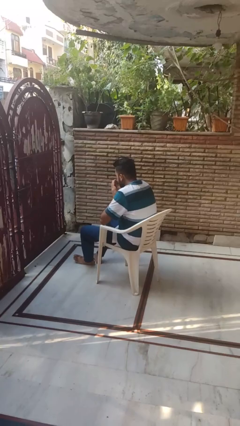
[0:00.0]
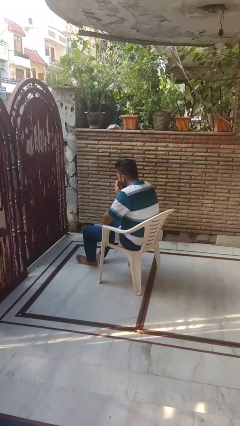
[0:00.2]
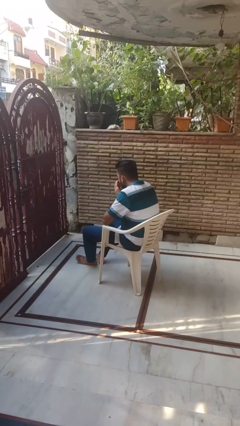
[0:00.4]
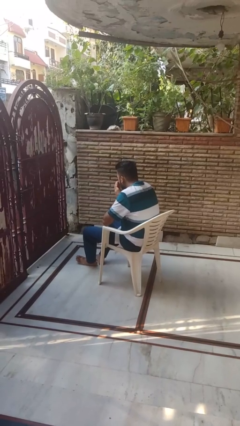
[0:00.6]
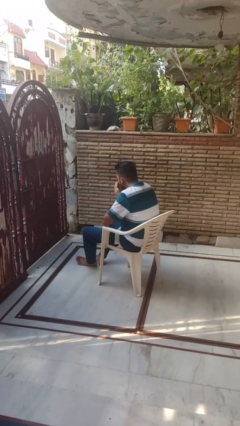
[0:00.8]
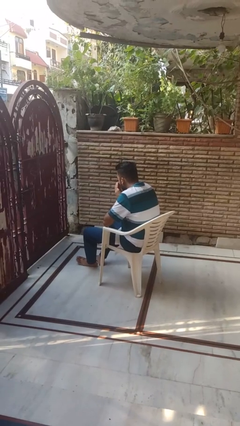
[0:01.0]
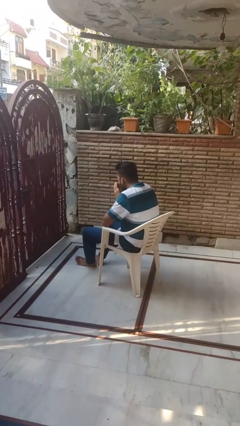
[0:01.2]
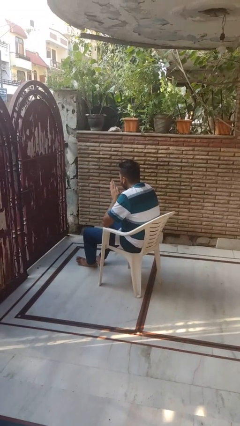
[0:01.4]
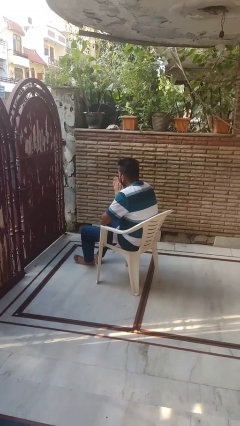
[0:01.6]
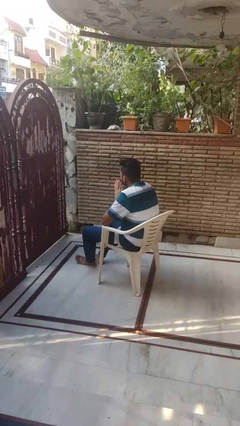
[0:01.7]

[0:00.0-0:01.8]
person blows into hands

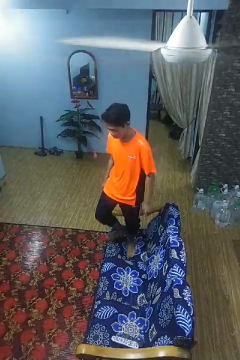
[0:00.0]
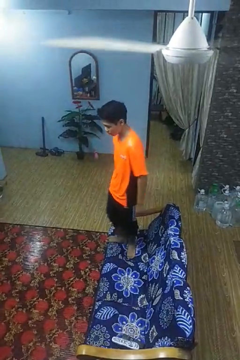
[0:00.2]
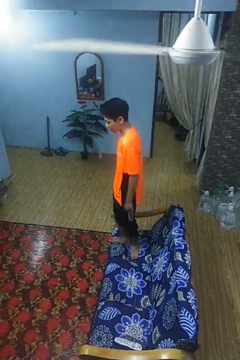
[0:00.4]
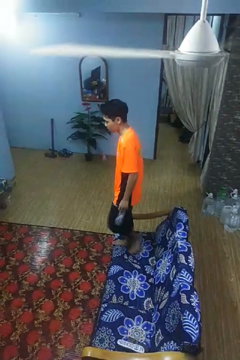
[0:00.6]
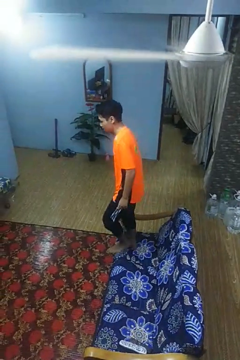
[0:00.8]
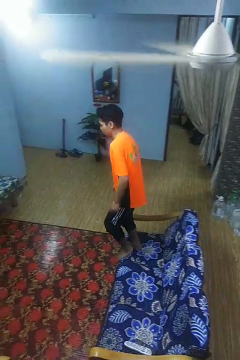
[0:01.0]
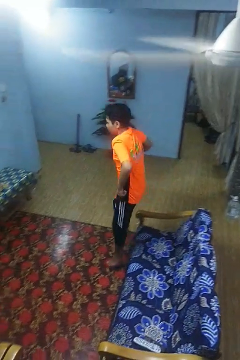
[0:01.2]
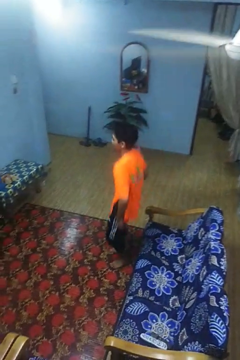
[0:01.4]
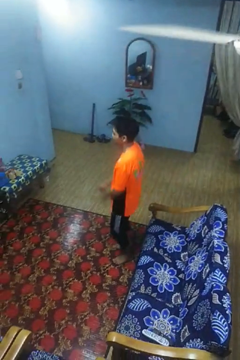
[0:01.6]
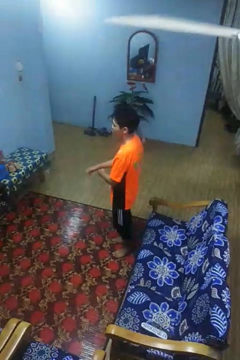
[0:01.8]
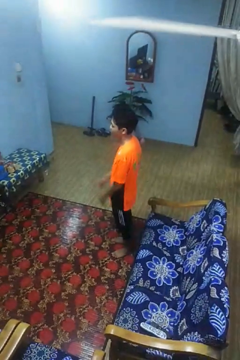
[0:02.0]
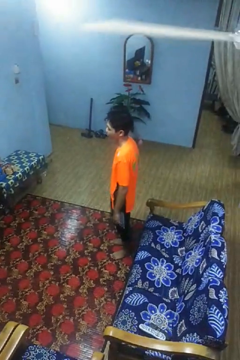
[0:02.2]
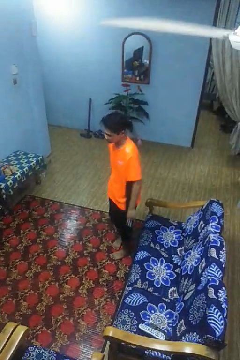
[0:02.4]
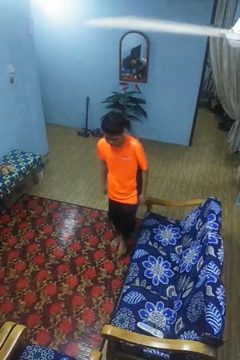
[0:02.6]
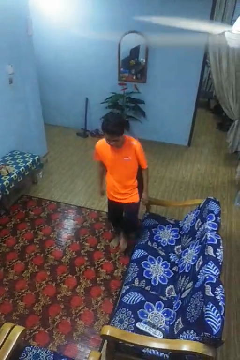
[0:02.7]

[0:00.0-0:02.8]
person jumps on couch

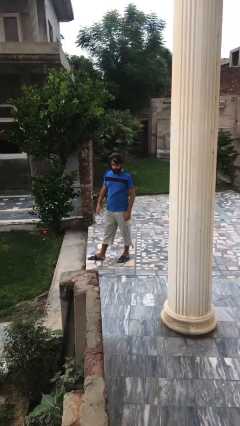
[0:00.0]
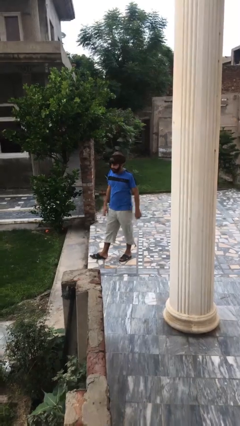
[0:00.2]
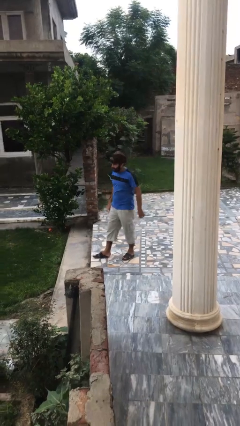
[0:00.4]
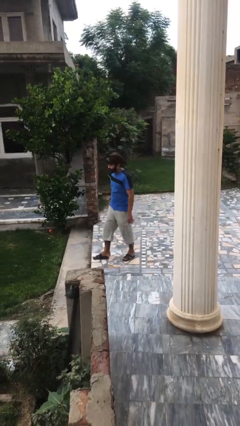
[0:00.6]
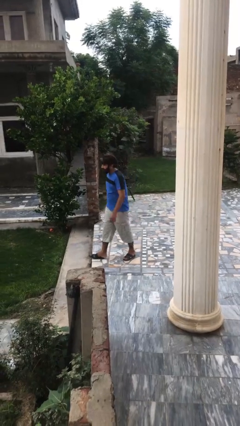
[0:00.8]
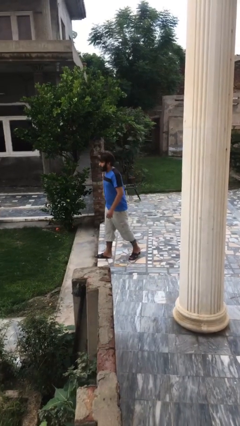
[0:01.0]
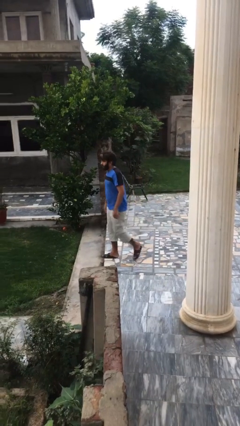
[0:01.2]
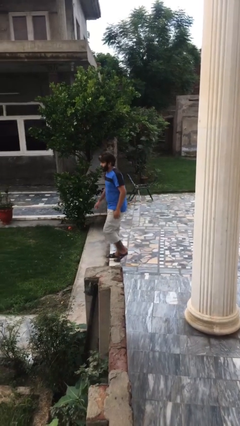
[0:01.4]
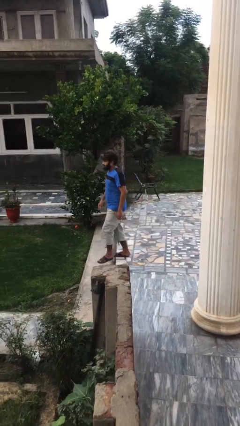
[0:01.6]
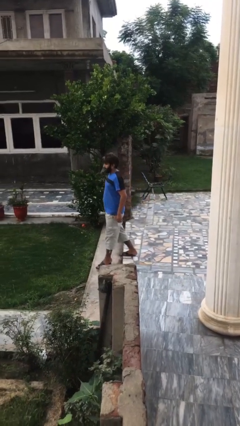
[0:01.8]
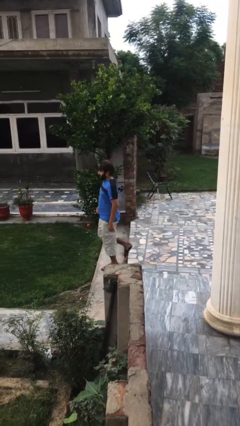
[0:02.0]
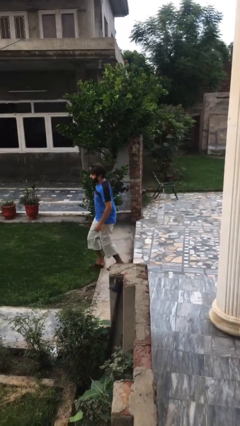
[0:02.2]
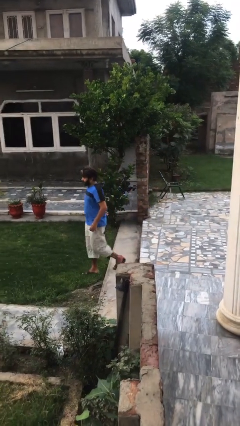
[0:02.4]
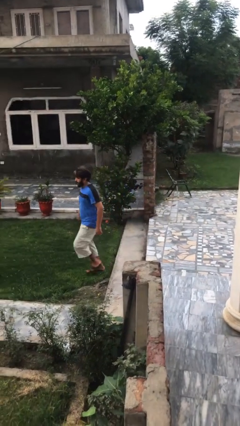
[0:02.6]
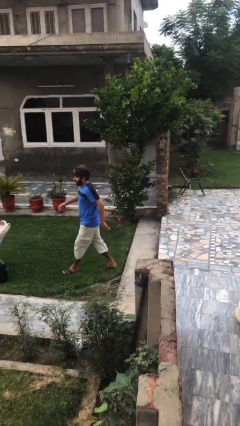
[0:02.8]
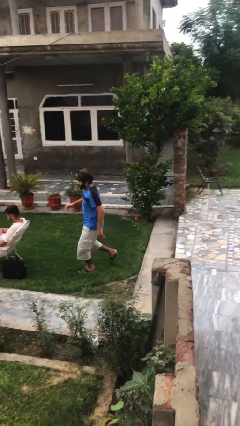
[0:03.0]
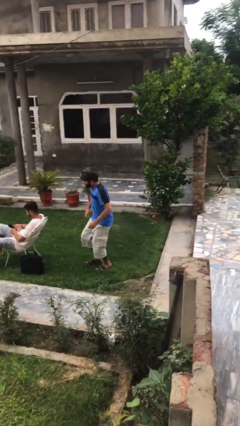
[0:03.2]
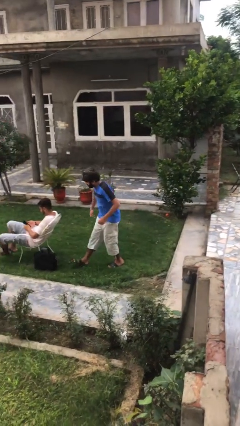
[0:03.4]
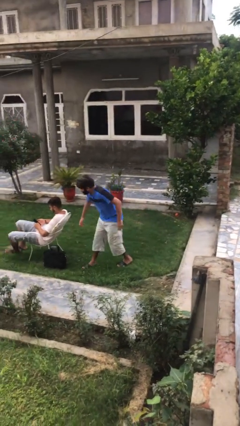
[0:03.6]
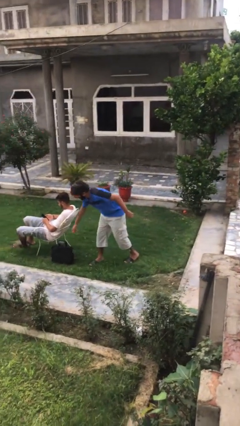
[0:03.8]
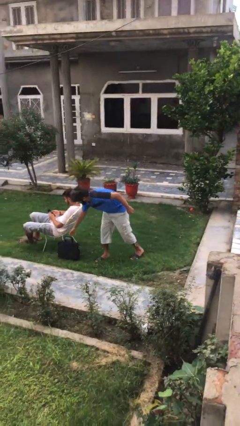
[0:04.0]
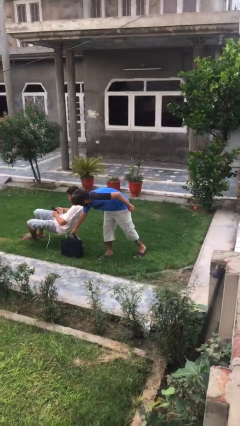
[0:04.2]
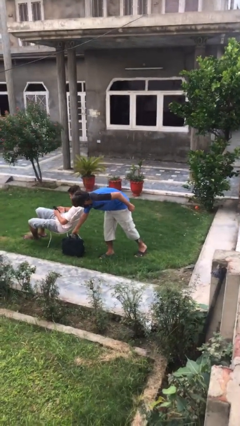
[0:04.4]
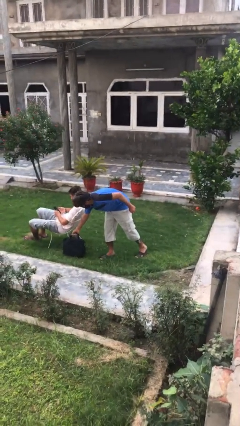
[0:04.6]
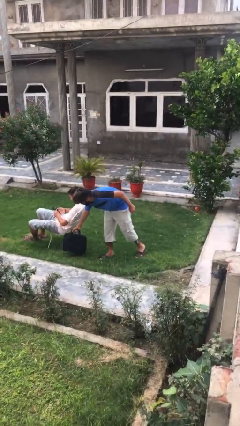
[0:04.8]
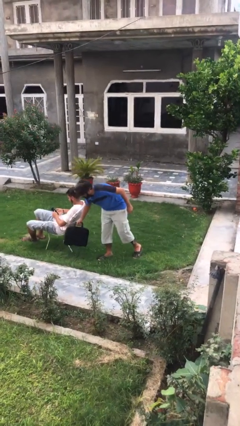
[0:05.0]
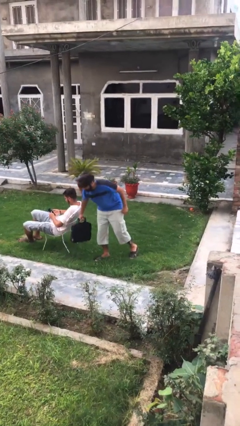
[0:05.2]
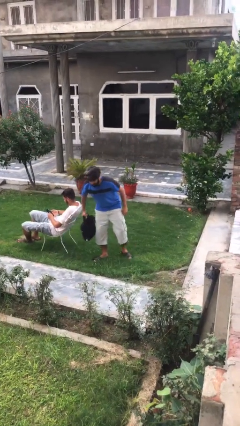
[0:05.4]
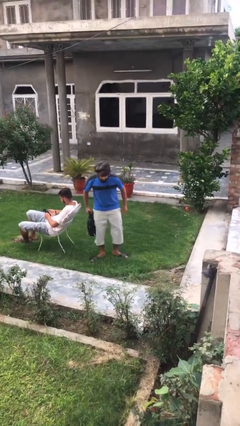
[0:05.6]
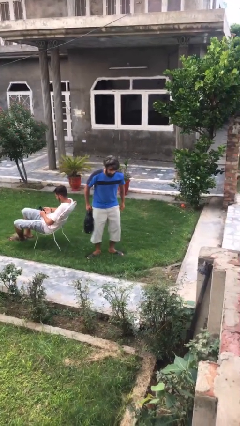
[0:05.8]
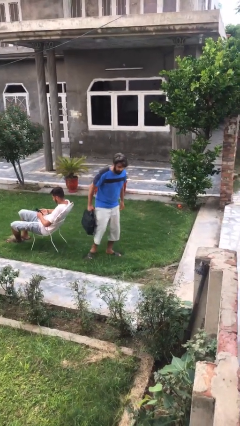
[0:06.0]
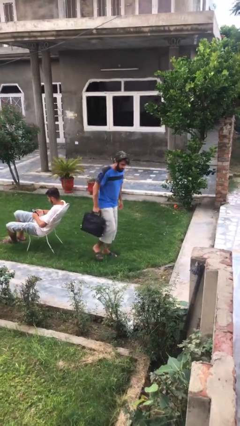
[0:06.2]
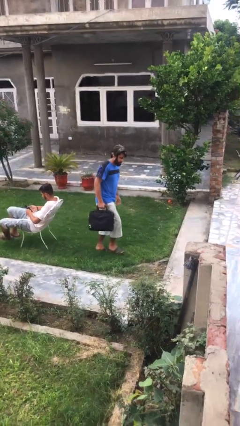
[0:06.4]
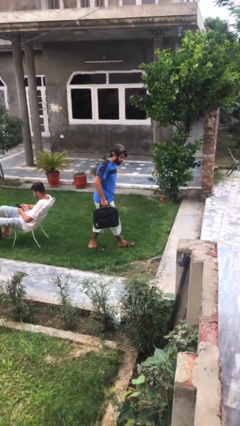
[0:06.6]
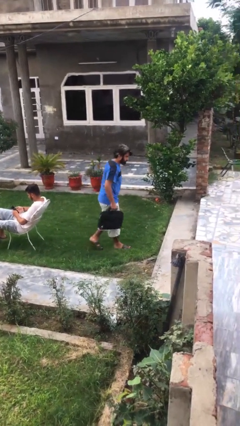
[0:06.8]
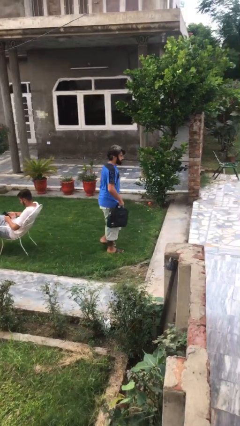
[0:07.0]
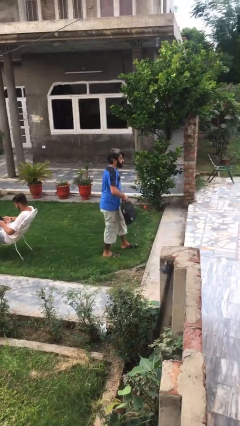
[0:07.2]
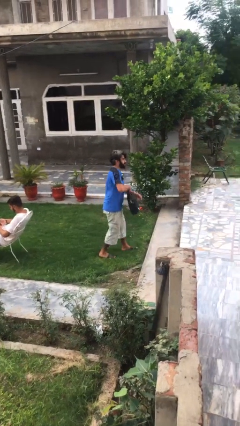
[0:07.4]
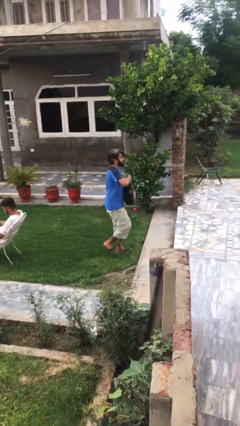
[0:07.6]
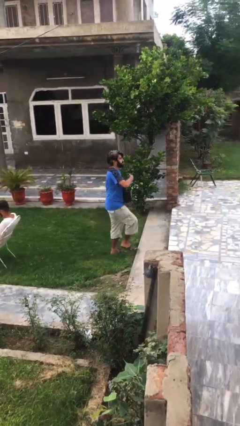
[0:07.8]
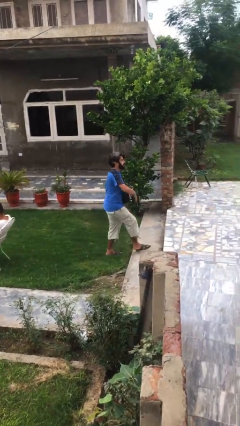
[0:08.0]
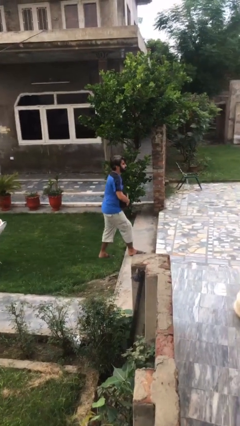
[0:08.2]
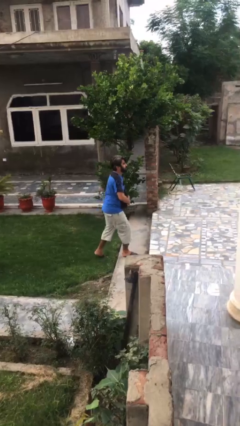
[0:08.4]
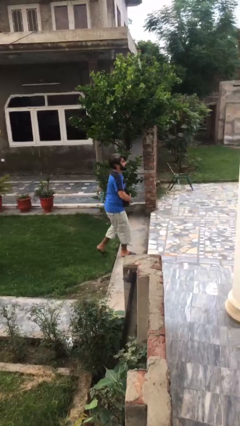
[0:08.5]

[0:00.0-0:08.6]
person steals object from person

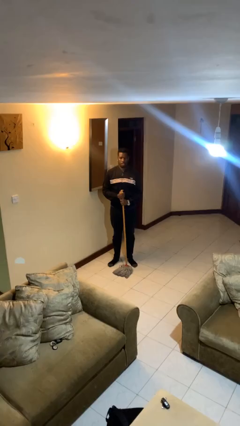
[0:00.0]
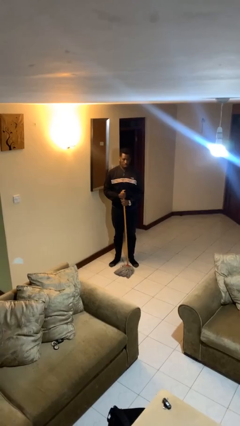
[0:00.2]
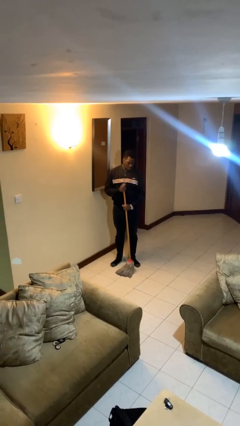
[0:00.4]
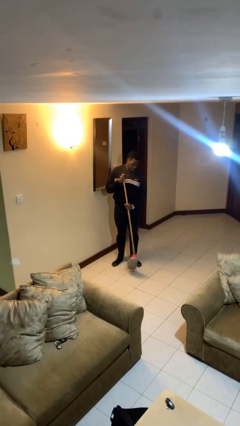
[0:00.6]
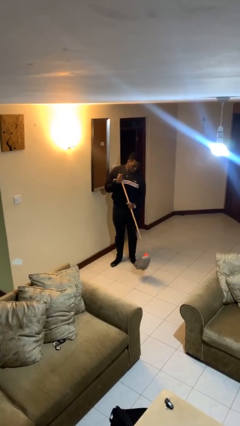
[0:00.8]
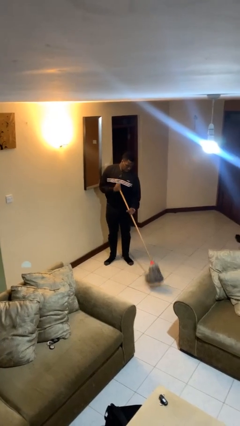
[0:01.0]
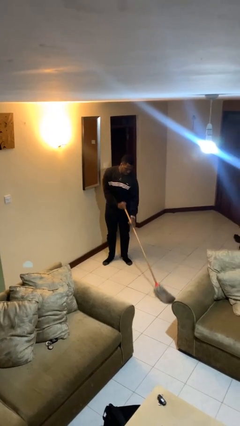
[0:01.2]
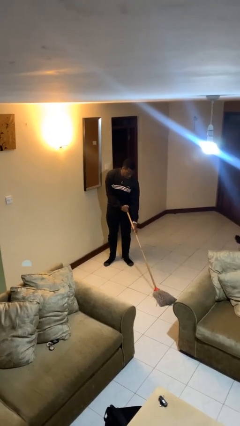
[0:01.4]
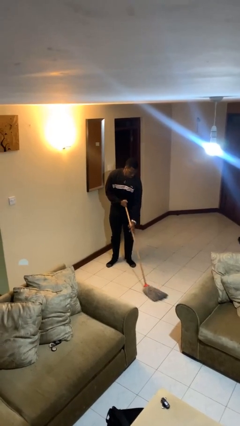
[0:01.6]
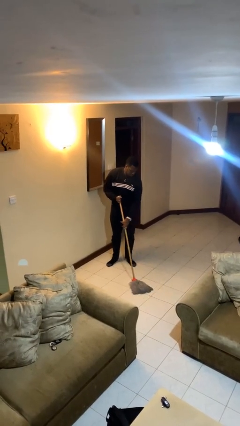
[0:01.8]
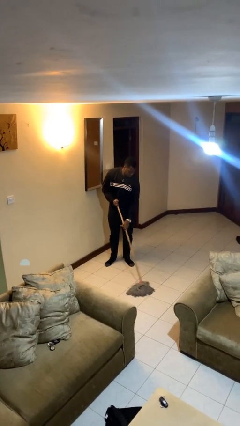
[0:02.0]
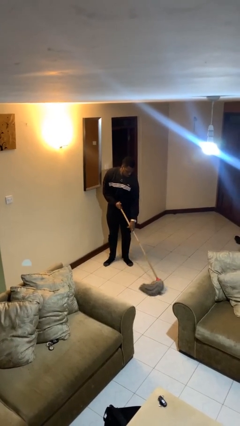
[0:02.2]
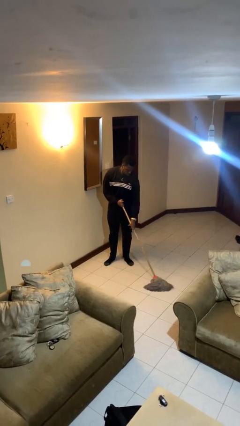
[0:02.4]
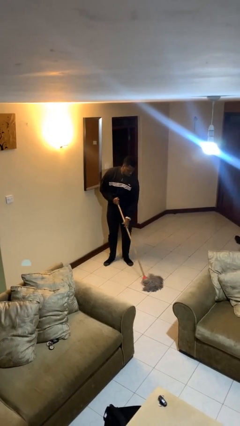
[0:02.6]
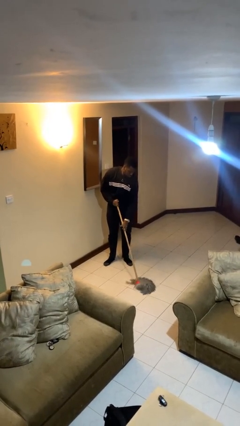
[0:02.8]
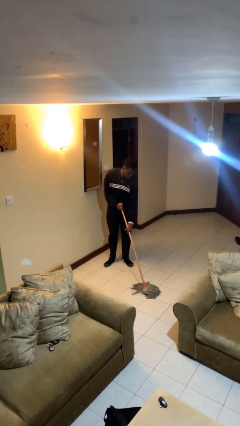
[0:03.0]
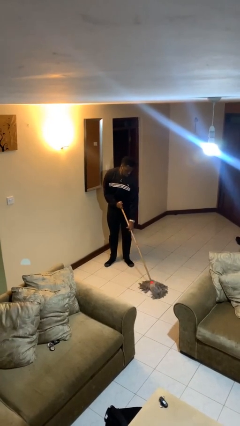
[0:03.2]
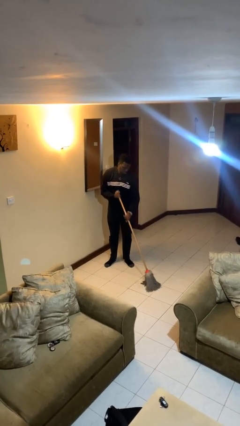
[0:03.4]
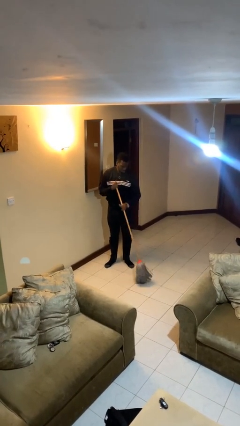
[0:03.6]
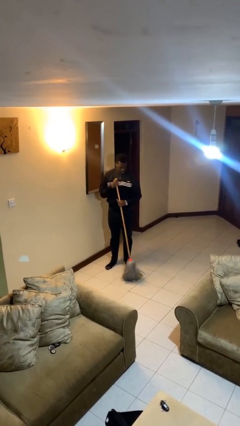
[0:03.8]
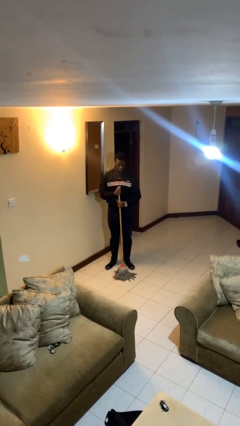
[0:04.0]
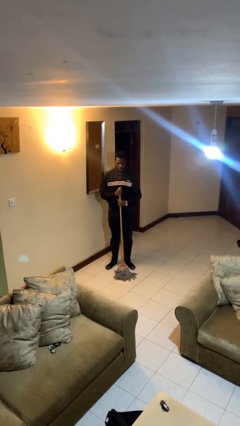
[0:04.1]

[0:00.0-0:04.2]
person mops

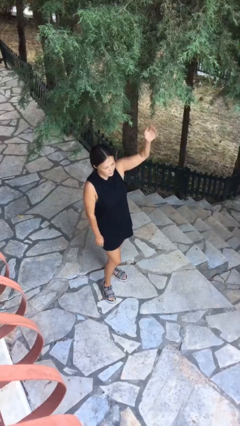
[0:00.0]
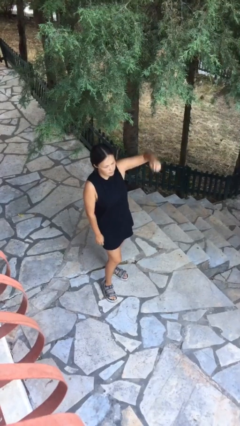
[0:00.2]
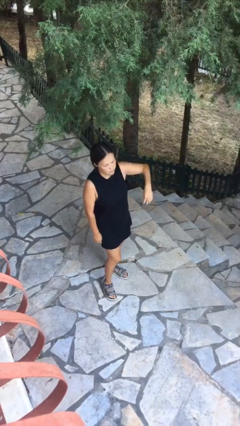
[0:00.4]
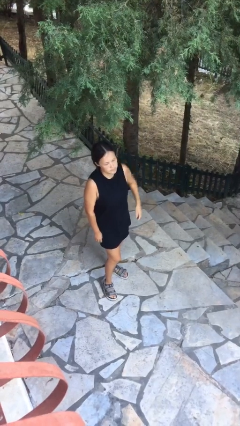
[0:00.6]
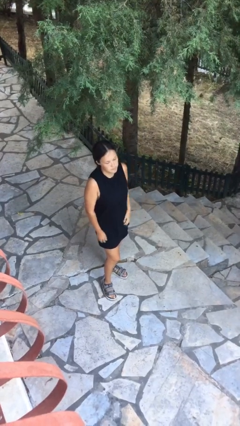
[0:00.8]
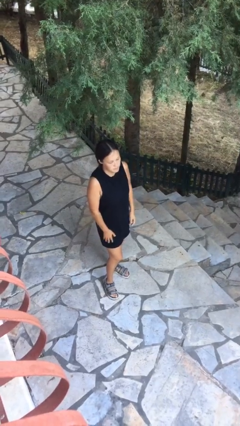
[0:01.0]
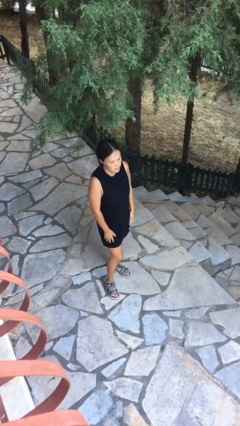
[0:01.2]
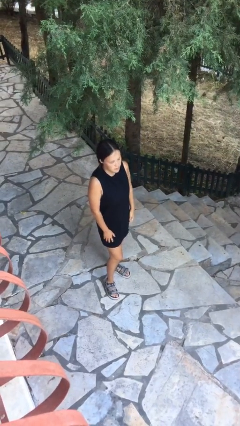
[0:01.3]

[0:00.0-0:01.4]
person gestures lower hand
